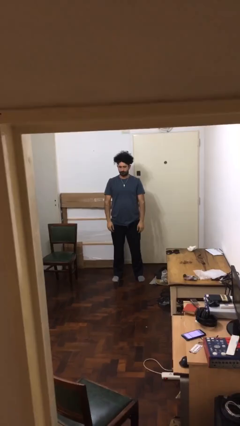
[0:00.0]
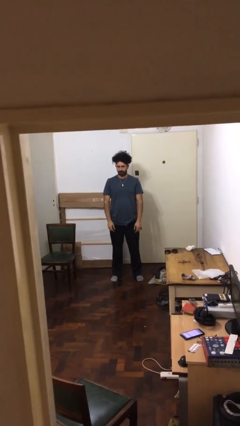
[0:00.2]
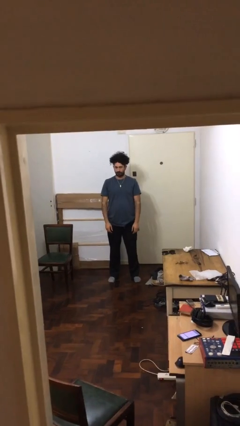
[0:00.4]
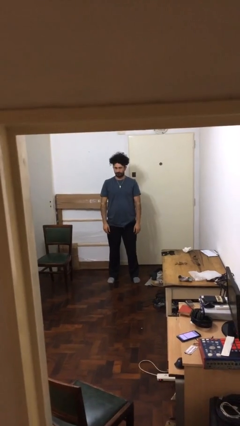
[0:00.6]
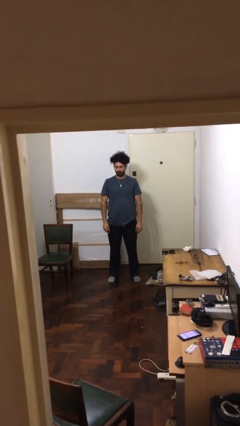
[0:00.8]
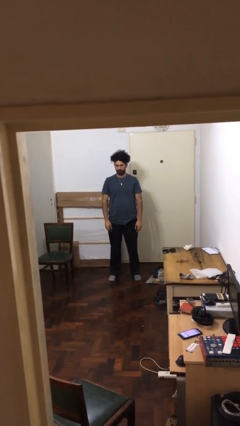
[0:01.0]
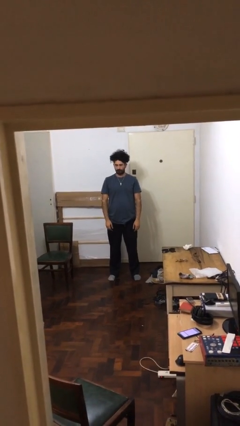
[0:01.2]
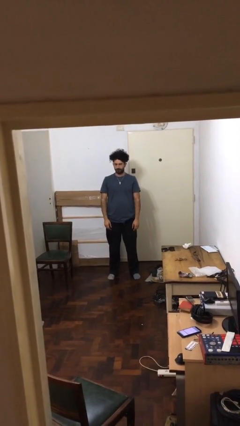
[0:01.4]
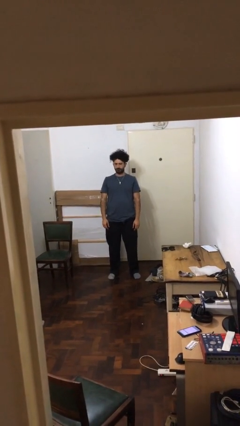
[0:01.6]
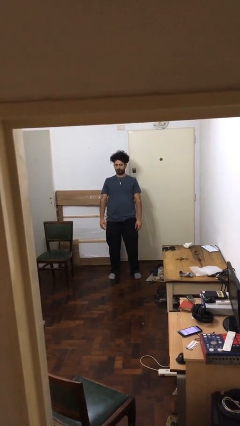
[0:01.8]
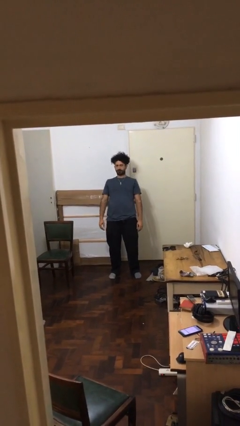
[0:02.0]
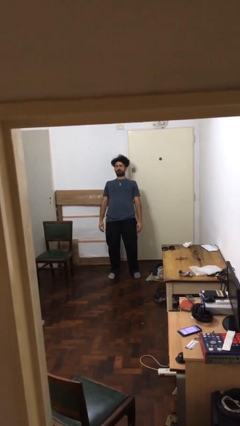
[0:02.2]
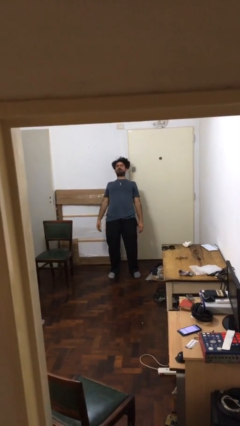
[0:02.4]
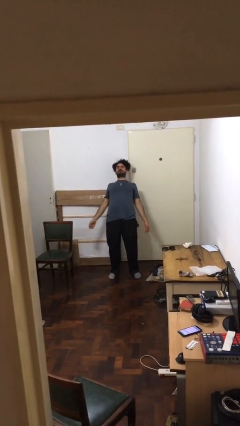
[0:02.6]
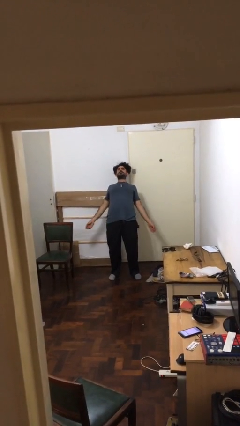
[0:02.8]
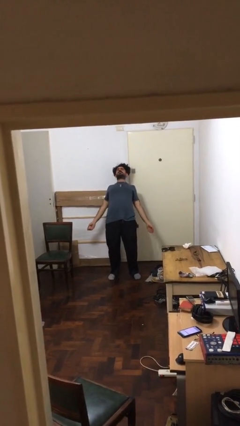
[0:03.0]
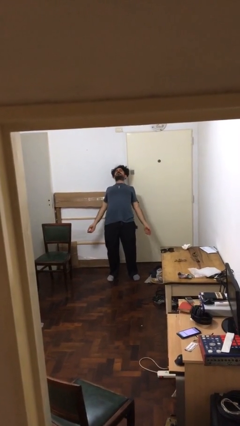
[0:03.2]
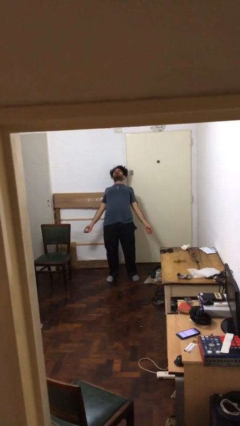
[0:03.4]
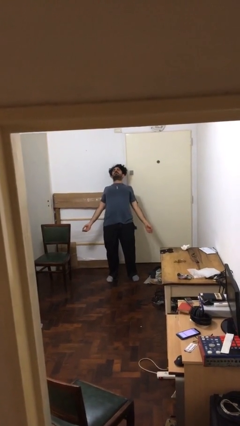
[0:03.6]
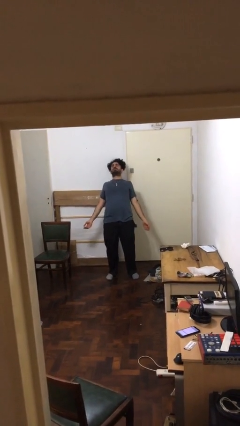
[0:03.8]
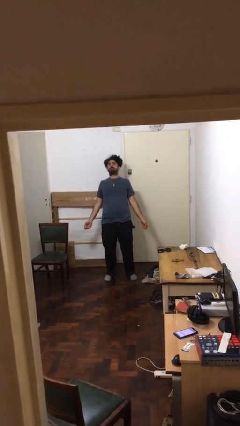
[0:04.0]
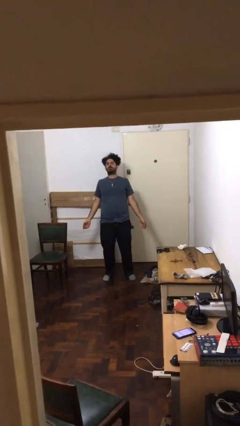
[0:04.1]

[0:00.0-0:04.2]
person stretches back

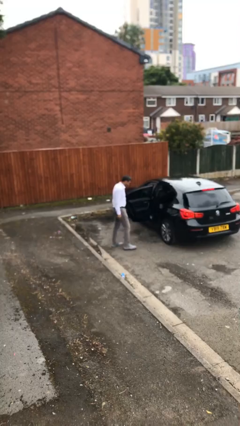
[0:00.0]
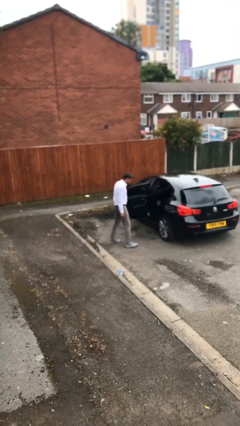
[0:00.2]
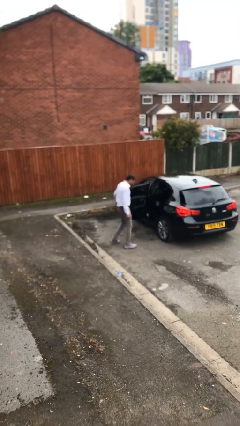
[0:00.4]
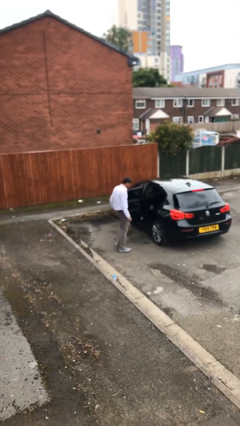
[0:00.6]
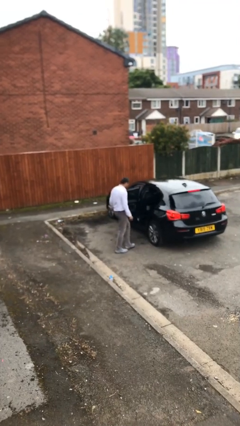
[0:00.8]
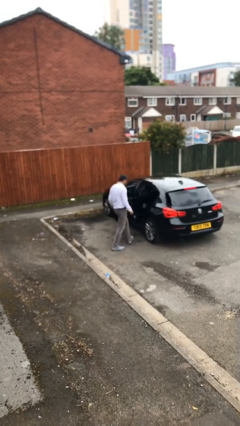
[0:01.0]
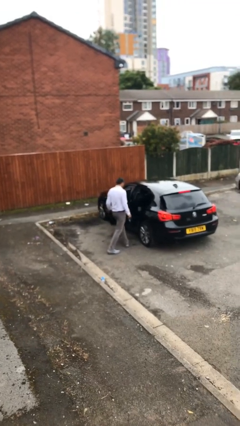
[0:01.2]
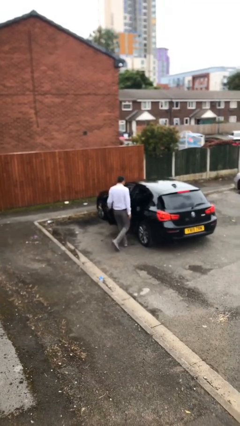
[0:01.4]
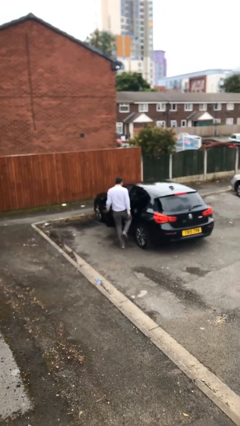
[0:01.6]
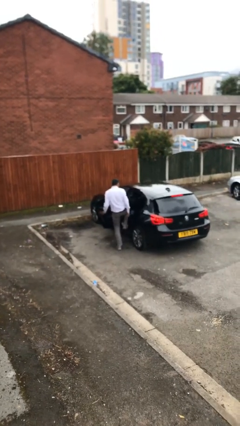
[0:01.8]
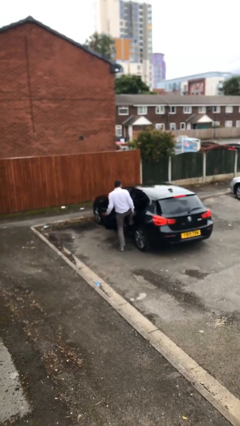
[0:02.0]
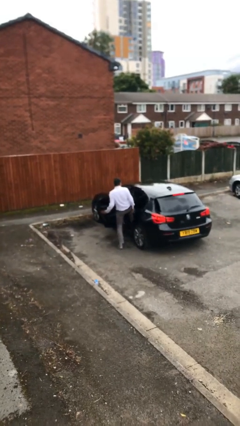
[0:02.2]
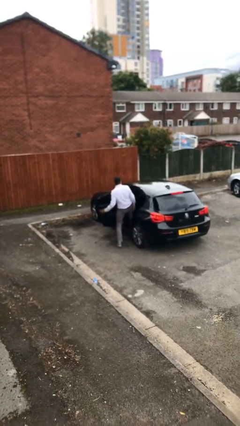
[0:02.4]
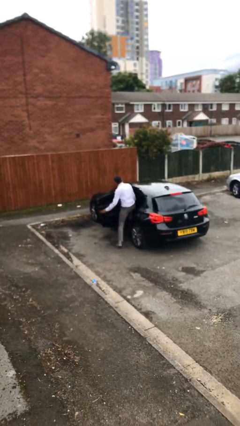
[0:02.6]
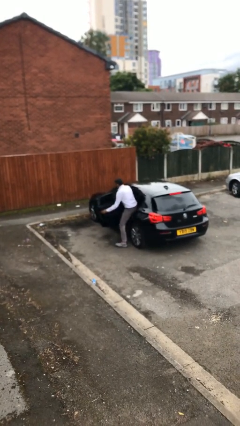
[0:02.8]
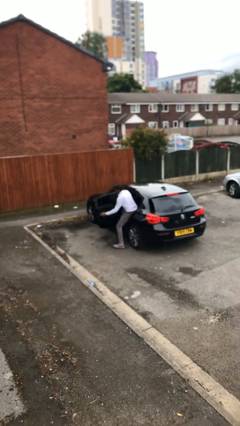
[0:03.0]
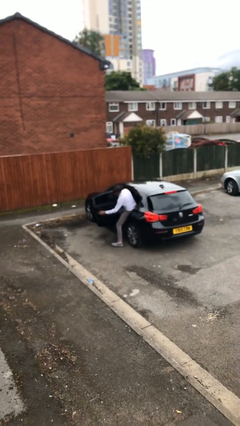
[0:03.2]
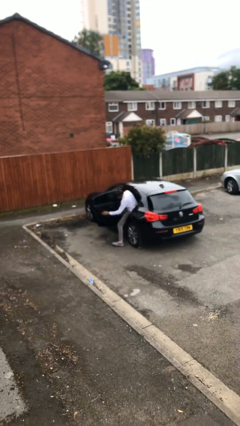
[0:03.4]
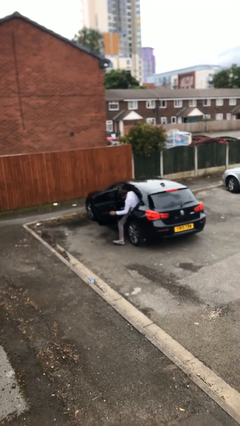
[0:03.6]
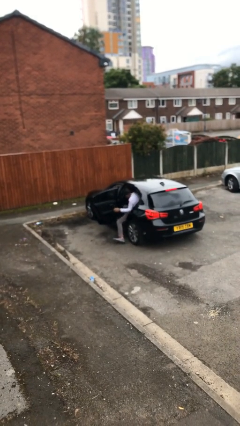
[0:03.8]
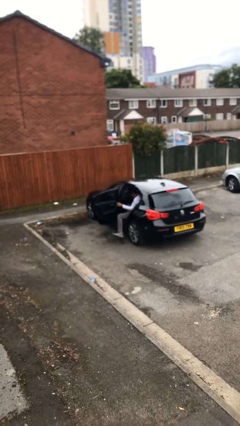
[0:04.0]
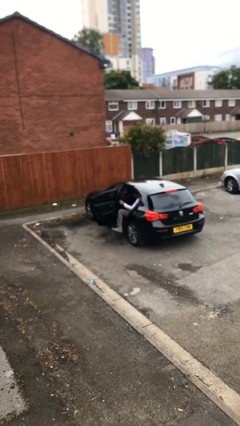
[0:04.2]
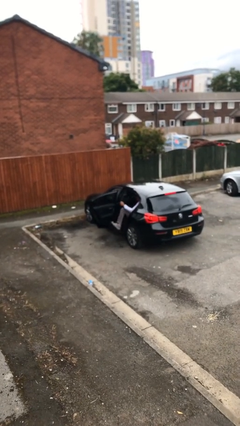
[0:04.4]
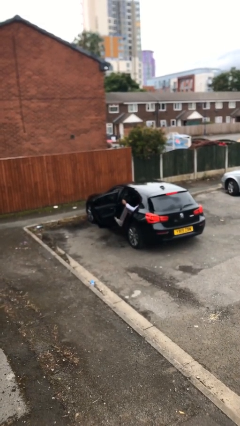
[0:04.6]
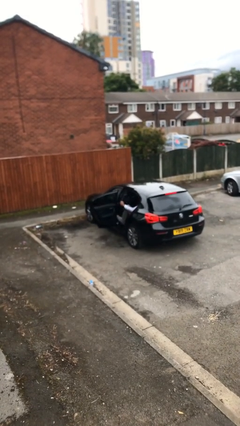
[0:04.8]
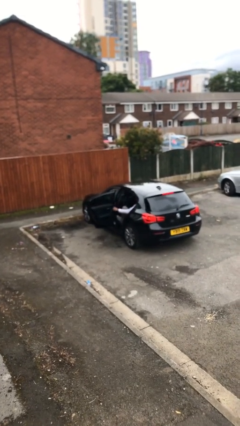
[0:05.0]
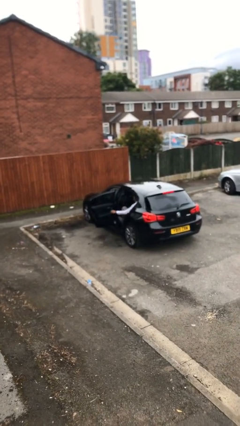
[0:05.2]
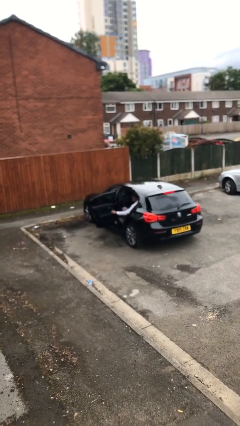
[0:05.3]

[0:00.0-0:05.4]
person enters car

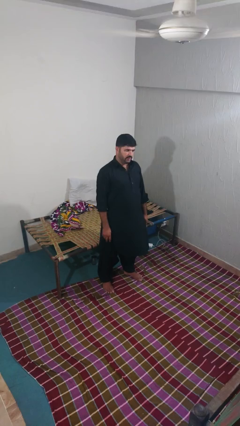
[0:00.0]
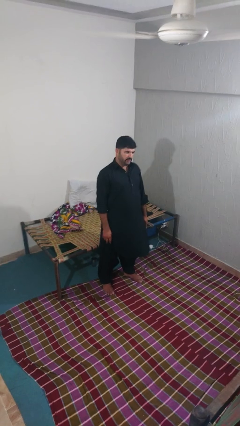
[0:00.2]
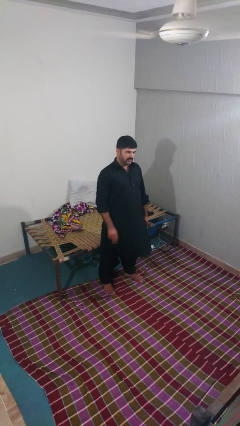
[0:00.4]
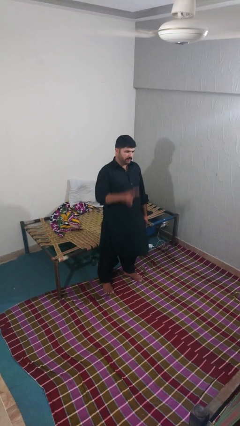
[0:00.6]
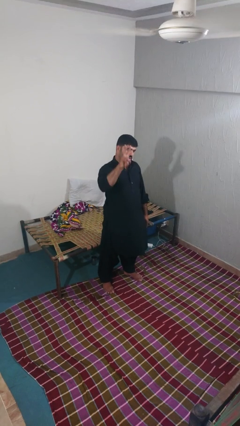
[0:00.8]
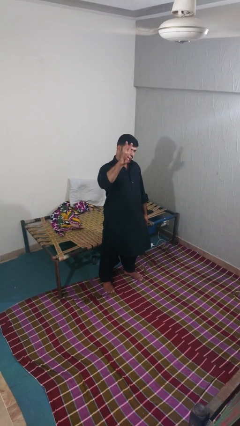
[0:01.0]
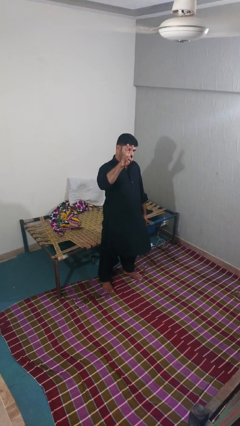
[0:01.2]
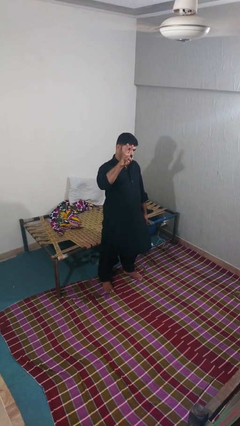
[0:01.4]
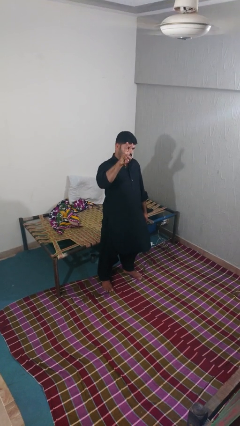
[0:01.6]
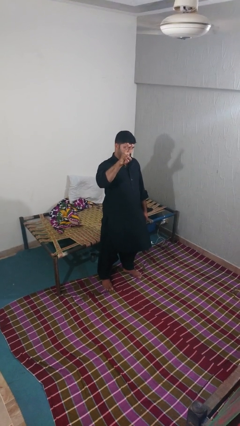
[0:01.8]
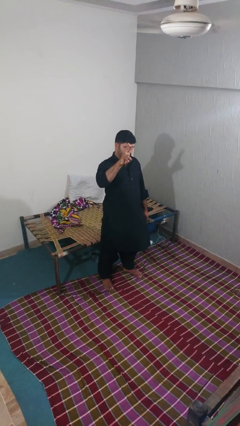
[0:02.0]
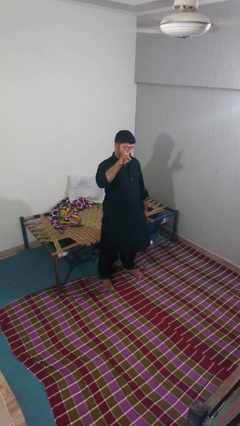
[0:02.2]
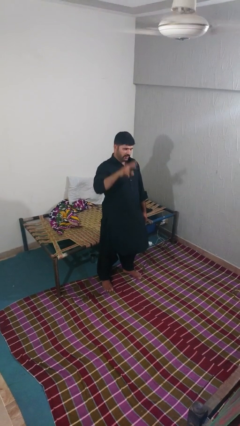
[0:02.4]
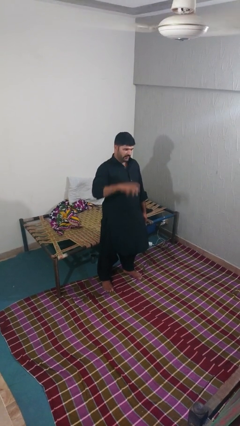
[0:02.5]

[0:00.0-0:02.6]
person gestures peace

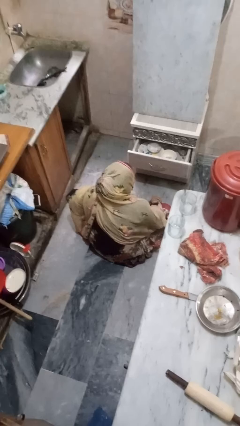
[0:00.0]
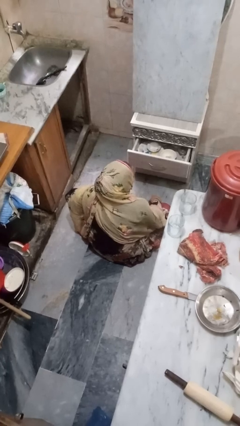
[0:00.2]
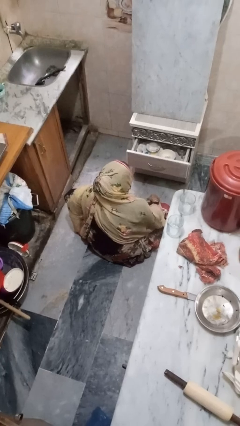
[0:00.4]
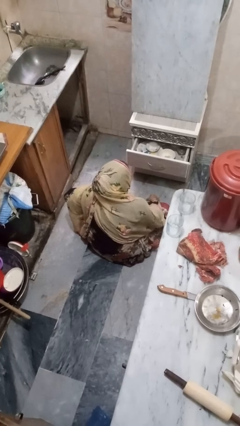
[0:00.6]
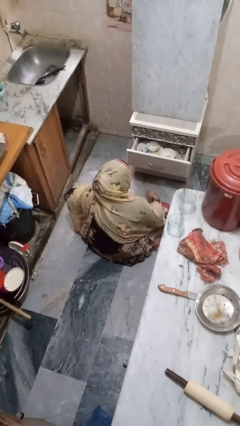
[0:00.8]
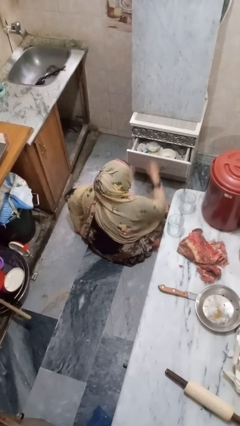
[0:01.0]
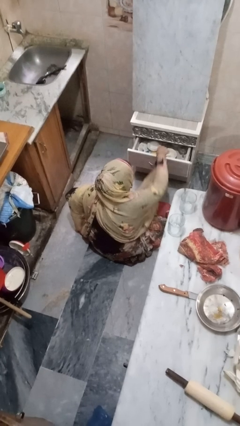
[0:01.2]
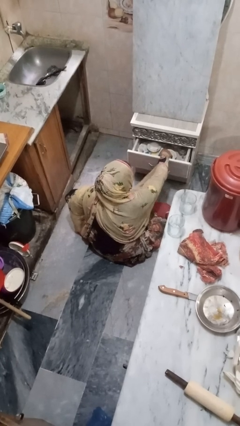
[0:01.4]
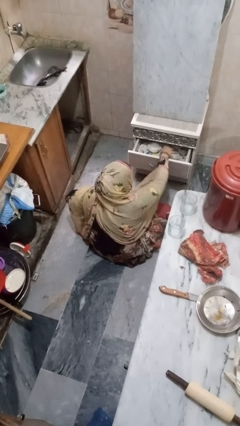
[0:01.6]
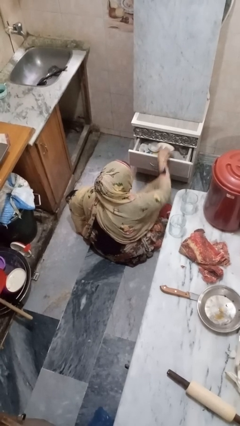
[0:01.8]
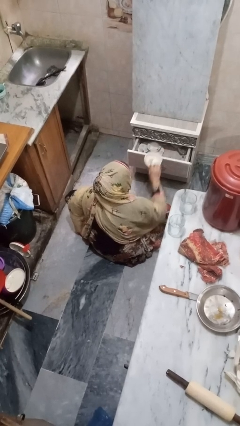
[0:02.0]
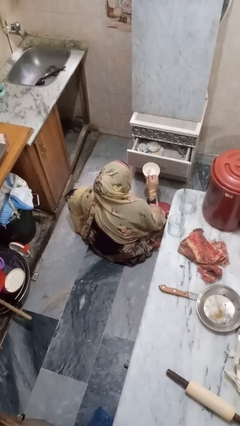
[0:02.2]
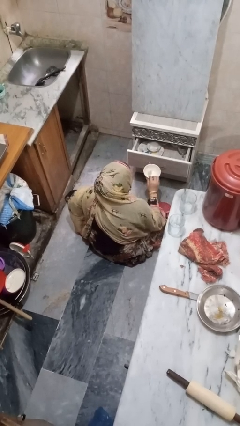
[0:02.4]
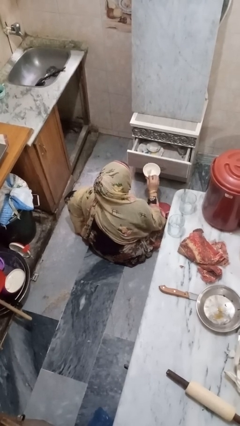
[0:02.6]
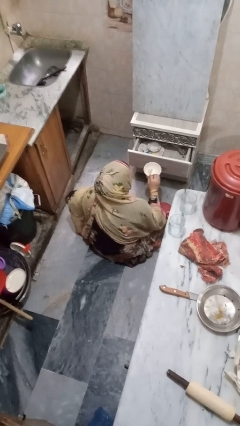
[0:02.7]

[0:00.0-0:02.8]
person takes object from kitchen drawer

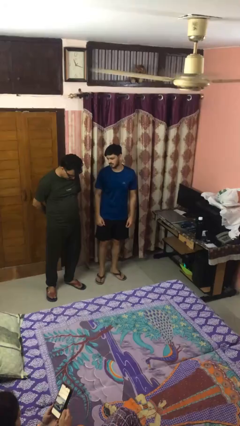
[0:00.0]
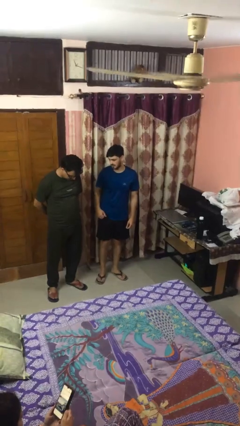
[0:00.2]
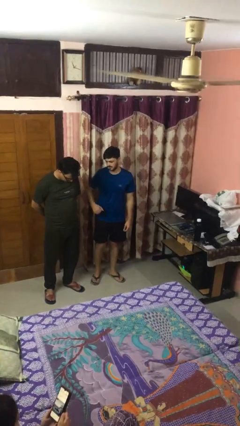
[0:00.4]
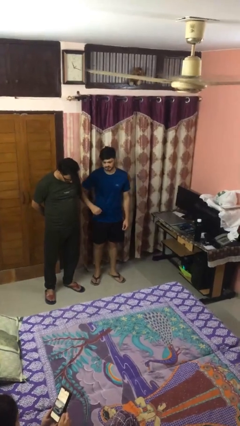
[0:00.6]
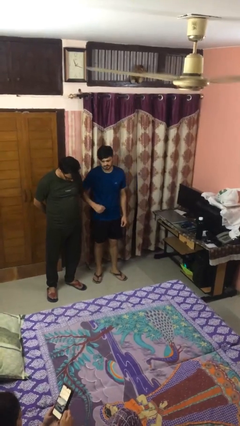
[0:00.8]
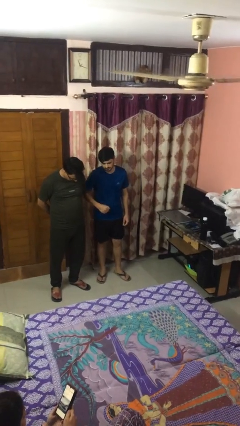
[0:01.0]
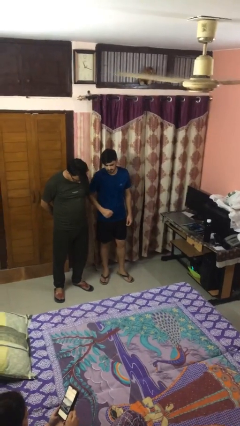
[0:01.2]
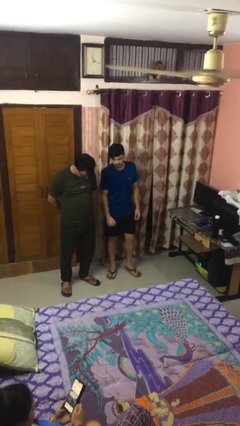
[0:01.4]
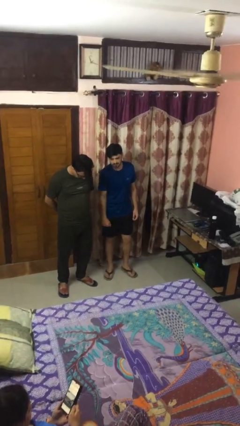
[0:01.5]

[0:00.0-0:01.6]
person nudges person with elbow

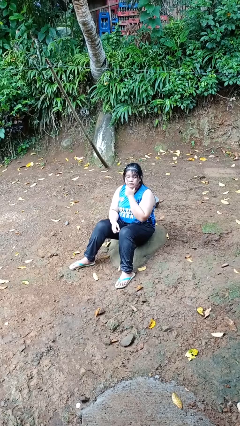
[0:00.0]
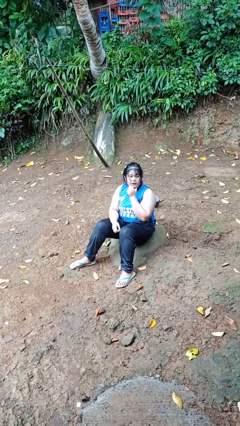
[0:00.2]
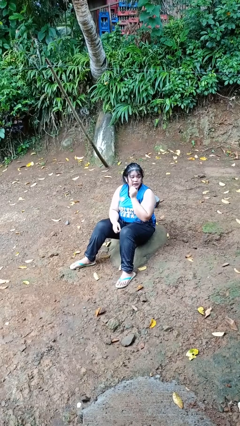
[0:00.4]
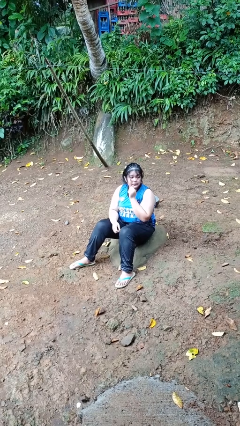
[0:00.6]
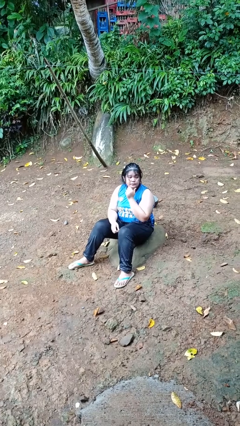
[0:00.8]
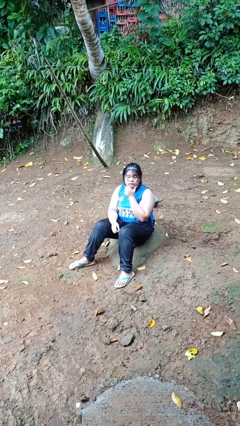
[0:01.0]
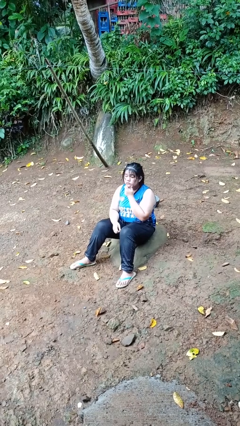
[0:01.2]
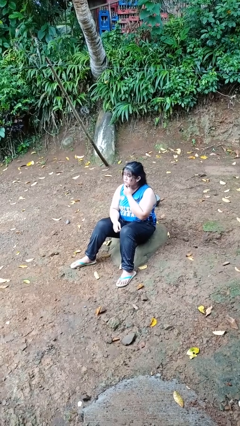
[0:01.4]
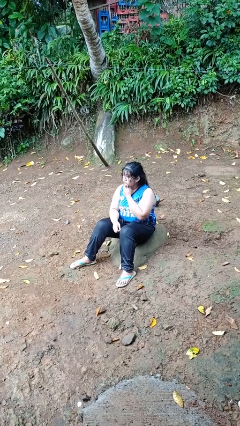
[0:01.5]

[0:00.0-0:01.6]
person strokes chin
